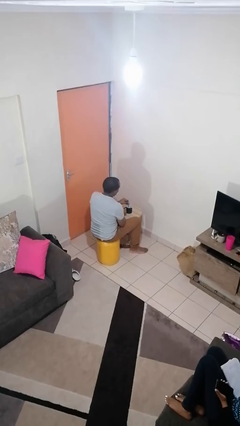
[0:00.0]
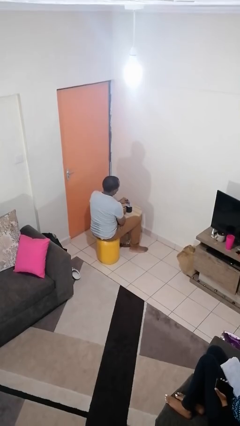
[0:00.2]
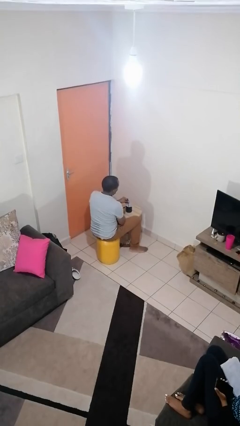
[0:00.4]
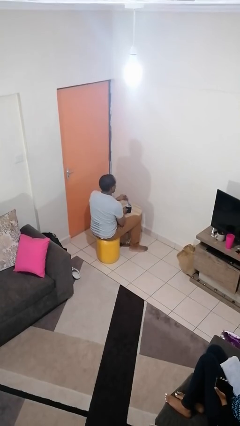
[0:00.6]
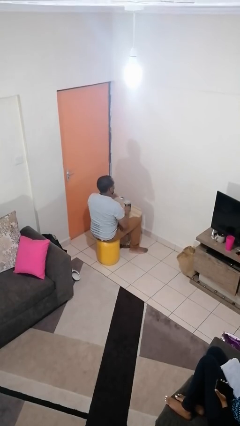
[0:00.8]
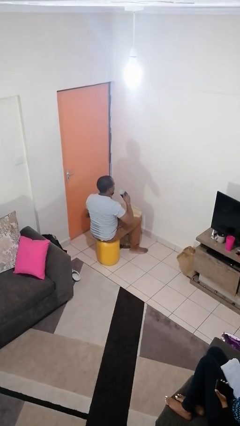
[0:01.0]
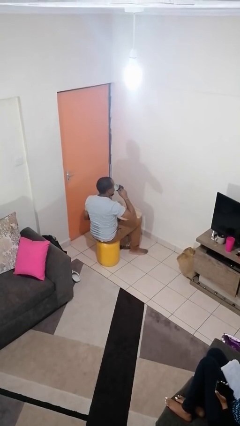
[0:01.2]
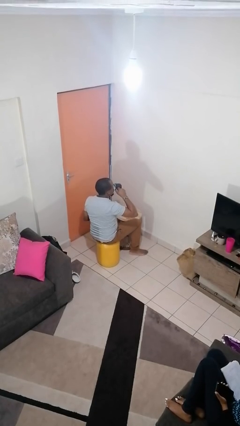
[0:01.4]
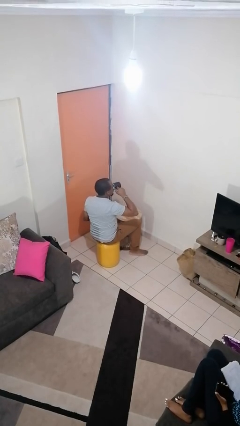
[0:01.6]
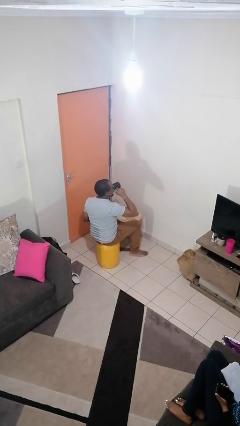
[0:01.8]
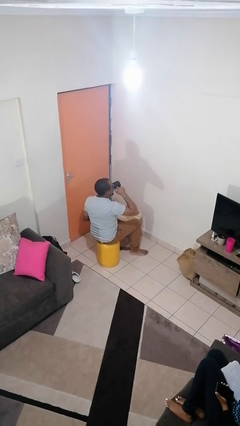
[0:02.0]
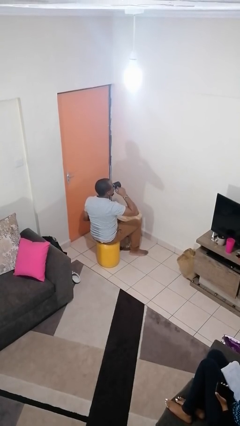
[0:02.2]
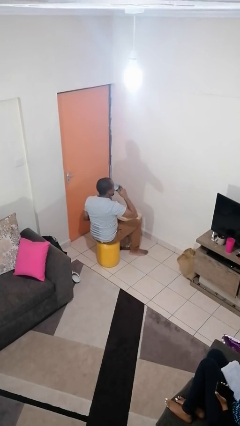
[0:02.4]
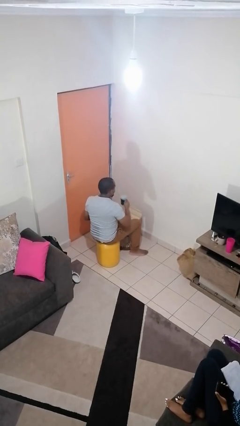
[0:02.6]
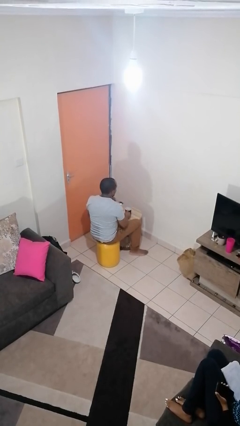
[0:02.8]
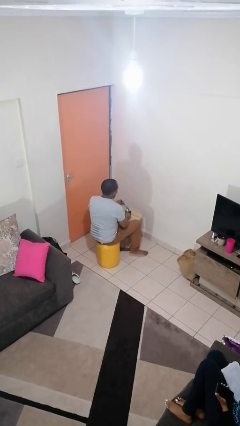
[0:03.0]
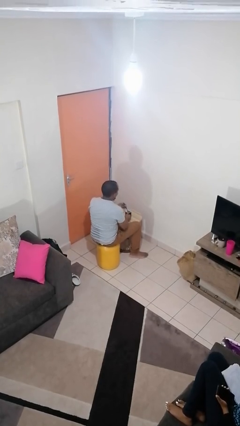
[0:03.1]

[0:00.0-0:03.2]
person drinks from mug

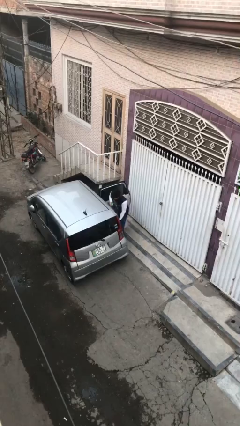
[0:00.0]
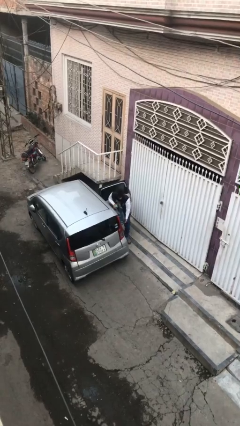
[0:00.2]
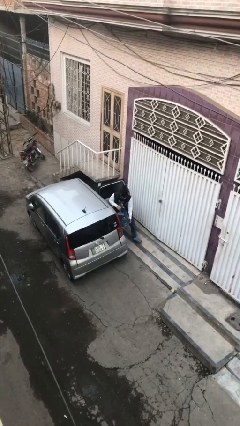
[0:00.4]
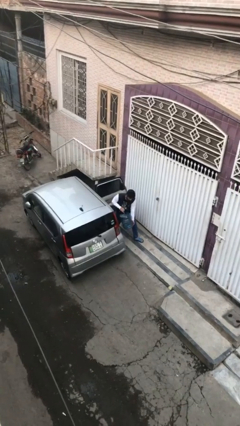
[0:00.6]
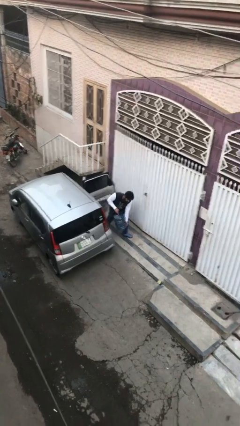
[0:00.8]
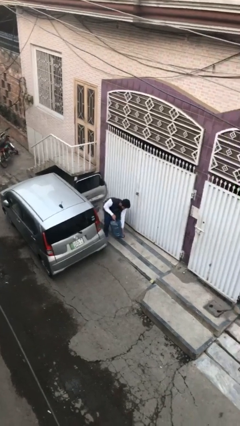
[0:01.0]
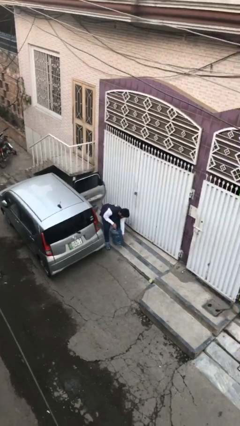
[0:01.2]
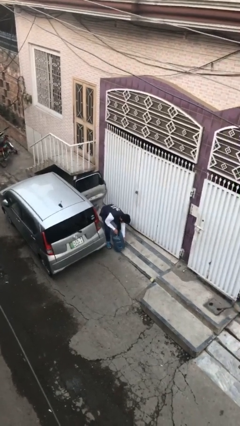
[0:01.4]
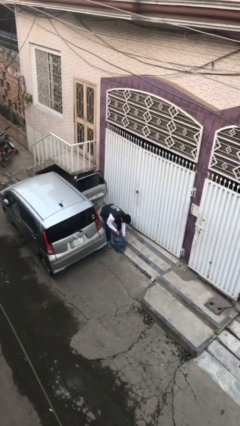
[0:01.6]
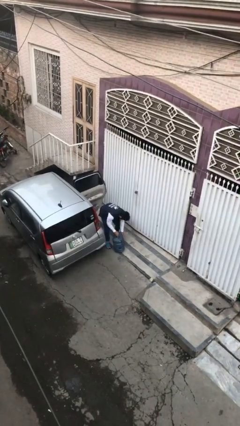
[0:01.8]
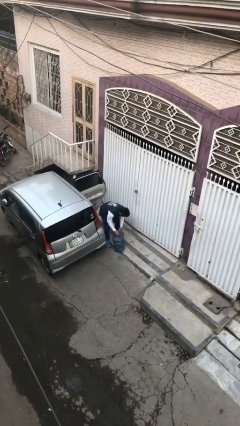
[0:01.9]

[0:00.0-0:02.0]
person unloads car

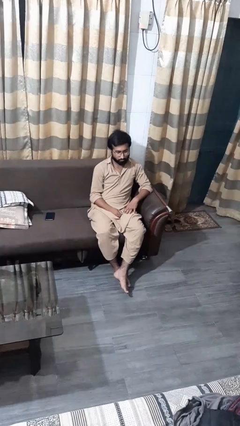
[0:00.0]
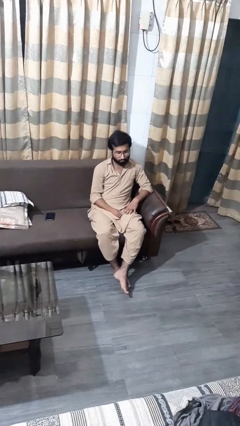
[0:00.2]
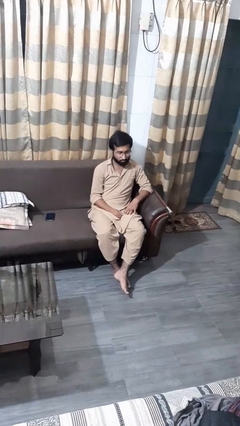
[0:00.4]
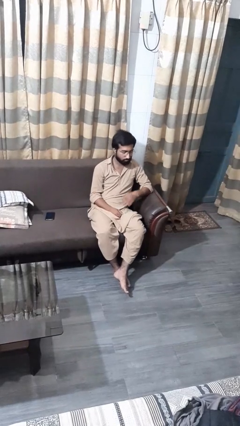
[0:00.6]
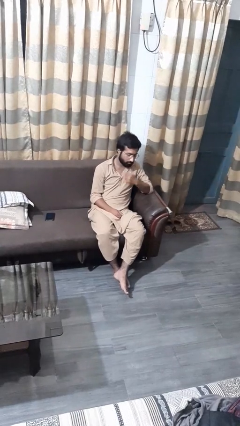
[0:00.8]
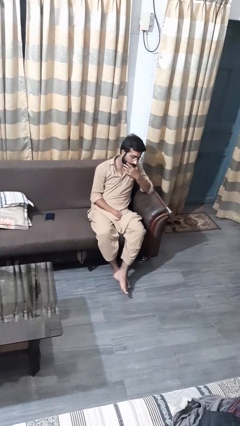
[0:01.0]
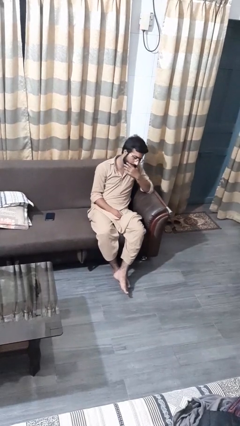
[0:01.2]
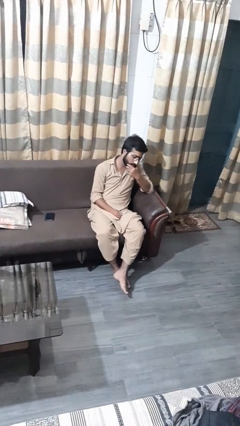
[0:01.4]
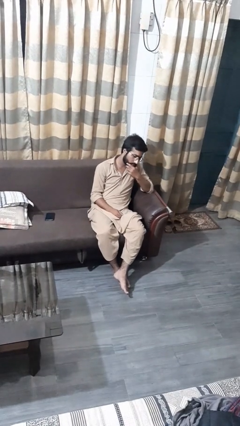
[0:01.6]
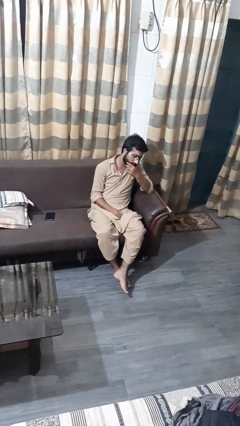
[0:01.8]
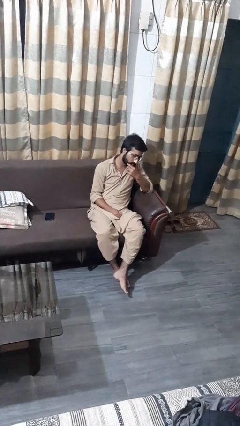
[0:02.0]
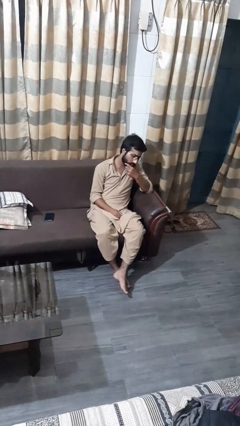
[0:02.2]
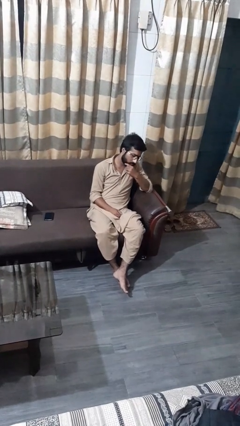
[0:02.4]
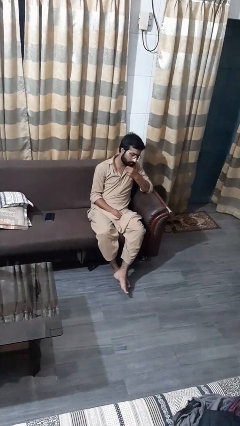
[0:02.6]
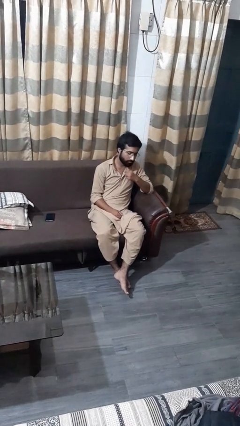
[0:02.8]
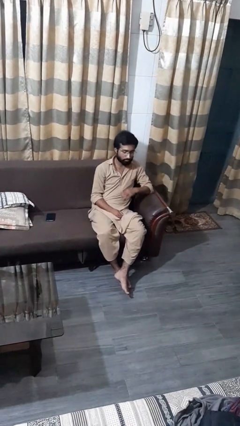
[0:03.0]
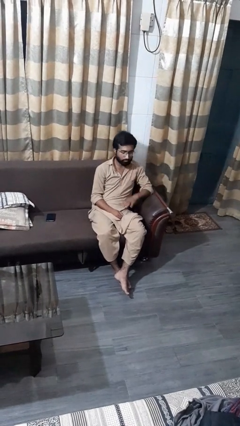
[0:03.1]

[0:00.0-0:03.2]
person strokes chin

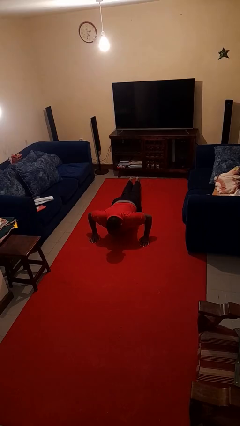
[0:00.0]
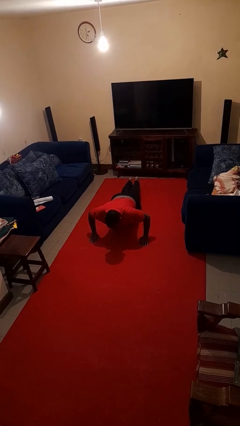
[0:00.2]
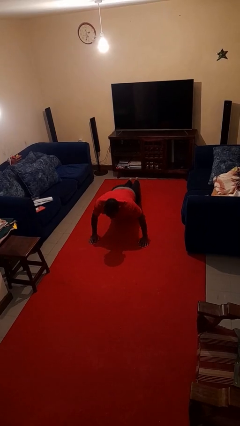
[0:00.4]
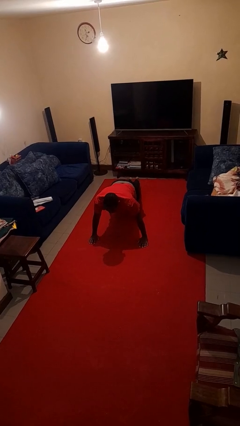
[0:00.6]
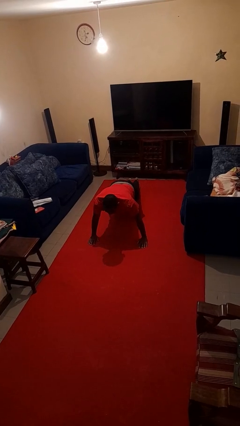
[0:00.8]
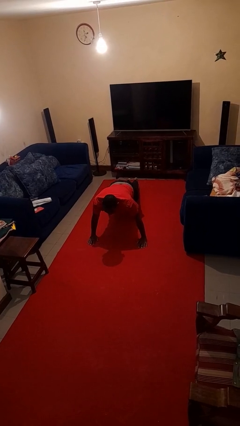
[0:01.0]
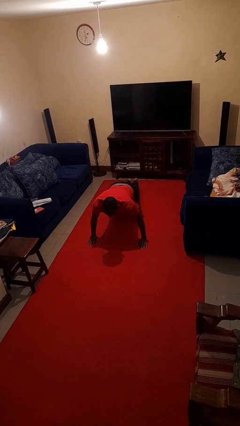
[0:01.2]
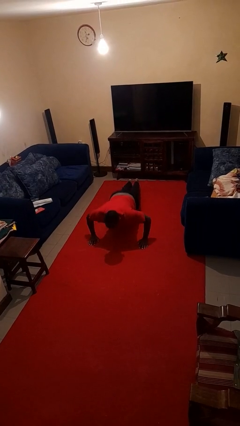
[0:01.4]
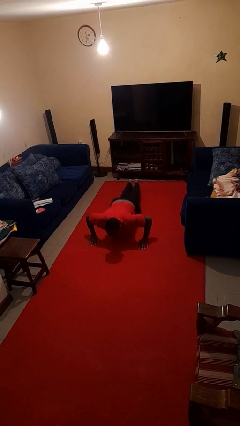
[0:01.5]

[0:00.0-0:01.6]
person exercises with pushup

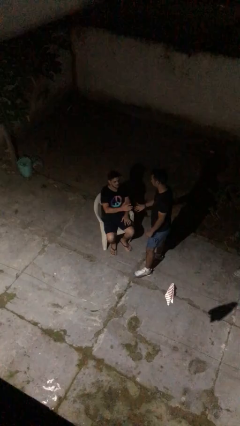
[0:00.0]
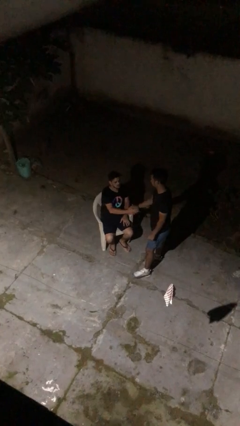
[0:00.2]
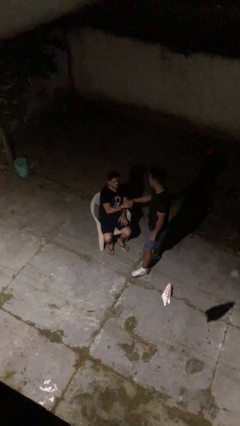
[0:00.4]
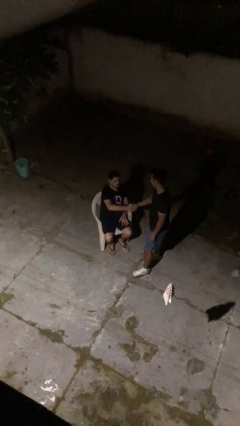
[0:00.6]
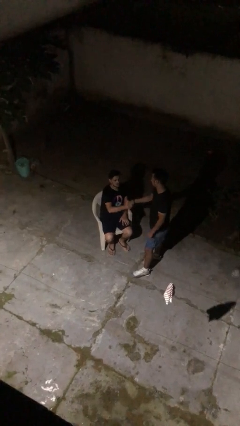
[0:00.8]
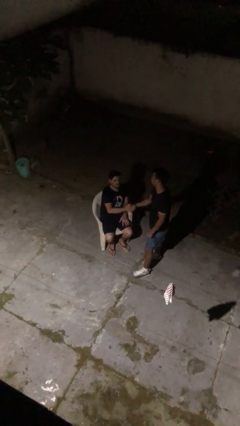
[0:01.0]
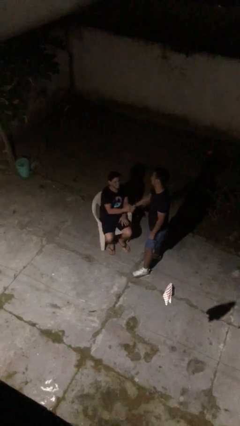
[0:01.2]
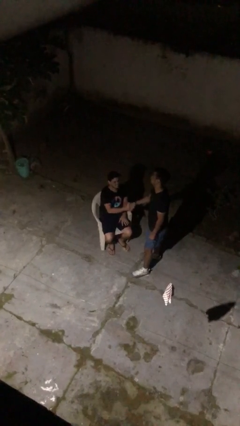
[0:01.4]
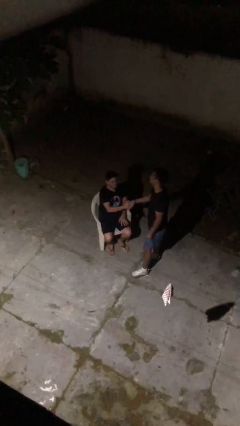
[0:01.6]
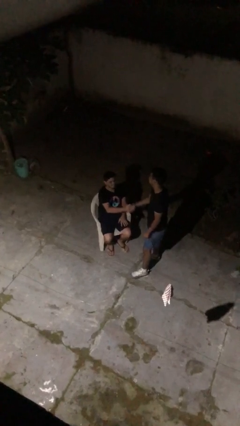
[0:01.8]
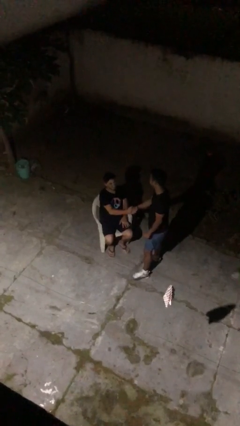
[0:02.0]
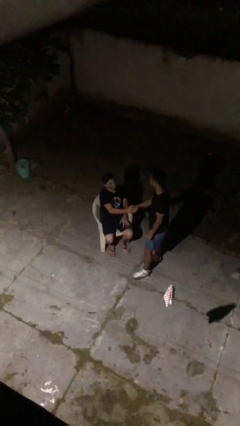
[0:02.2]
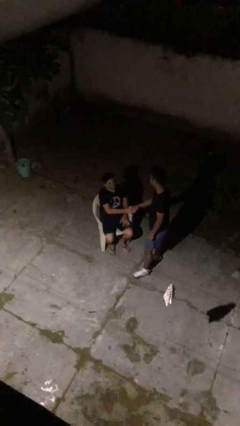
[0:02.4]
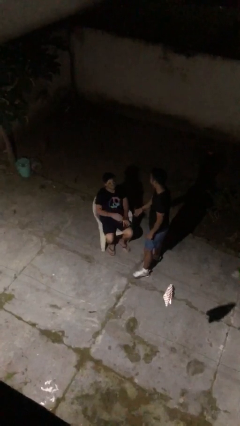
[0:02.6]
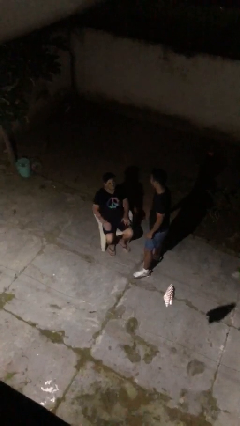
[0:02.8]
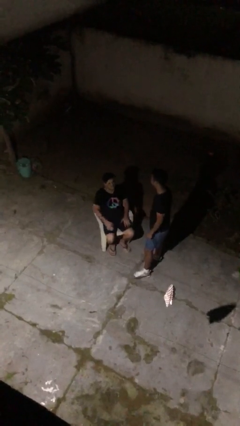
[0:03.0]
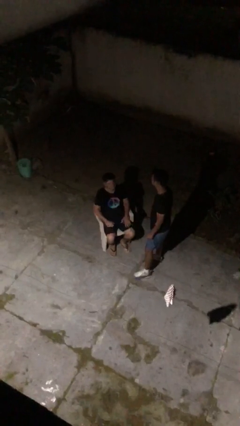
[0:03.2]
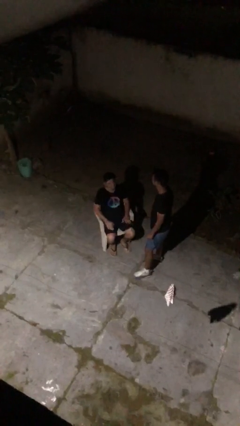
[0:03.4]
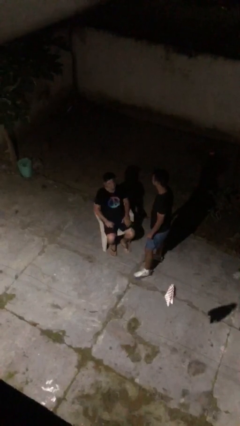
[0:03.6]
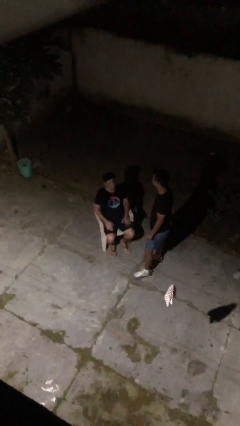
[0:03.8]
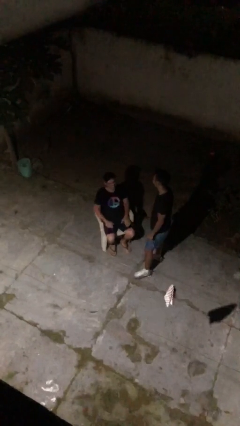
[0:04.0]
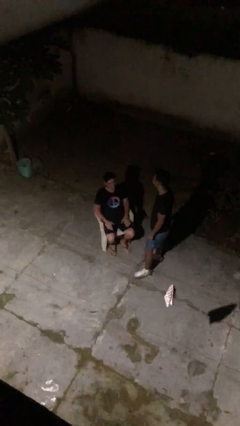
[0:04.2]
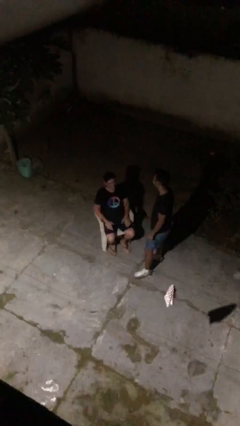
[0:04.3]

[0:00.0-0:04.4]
person shakes hand

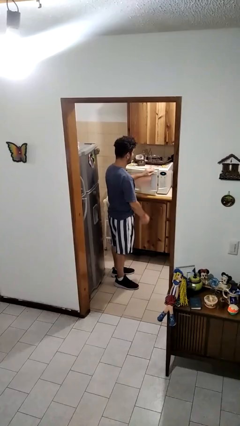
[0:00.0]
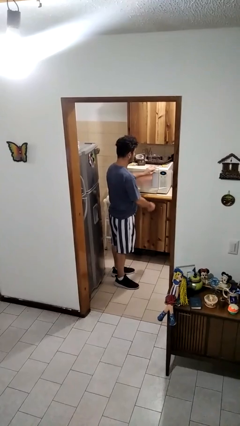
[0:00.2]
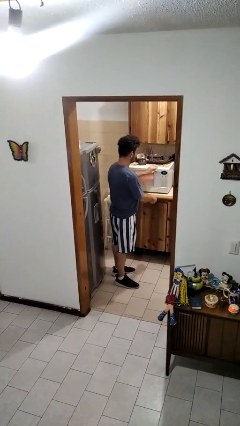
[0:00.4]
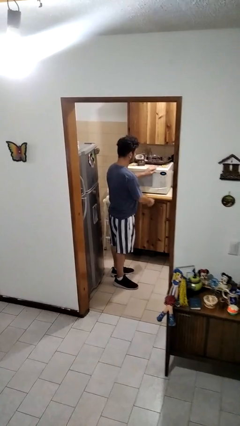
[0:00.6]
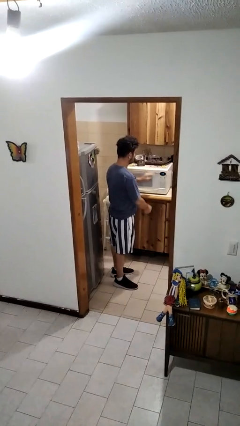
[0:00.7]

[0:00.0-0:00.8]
person closes microwave

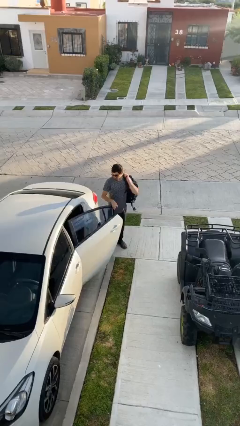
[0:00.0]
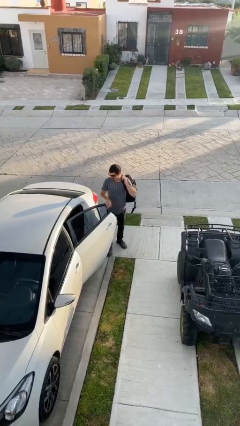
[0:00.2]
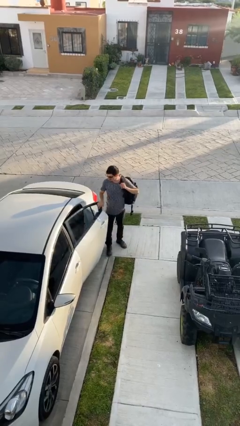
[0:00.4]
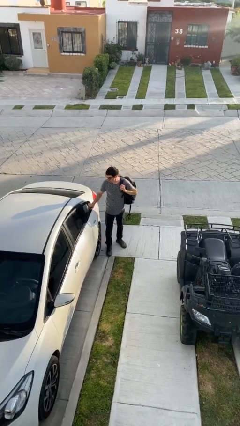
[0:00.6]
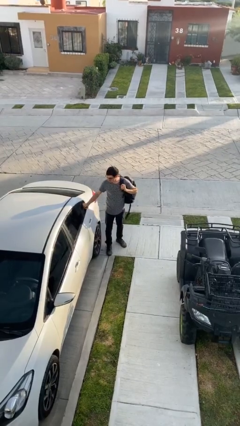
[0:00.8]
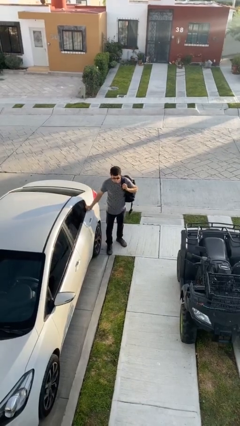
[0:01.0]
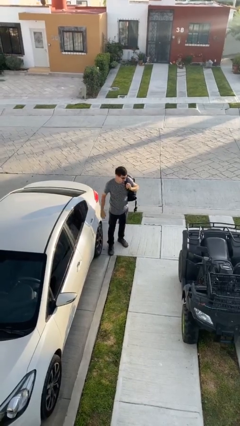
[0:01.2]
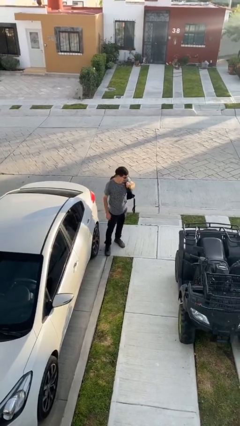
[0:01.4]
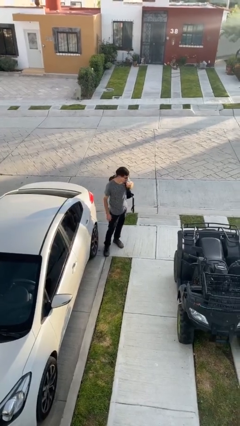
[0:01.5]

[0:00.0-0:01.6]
person closes car door

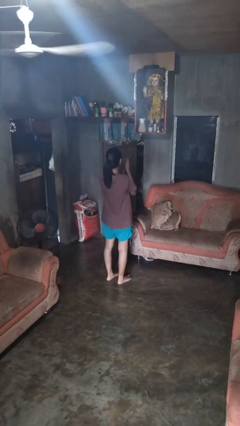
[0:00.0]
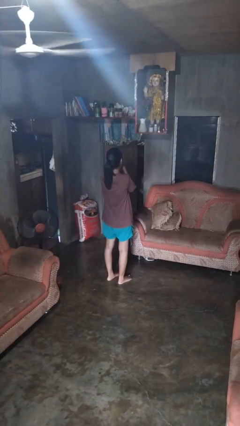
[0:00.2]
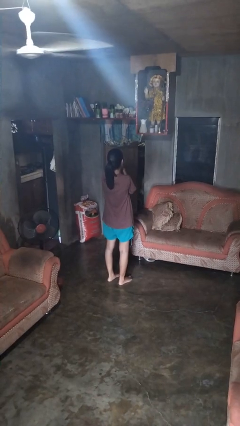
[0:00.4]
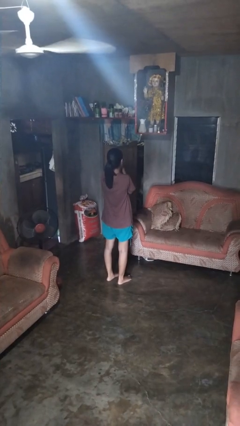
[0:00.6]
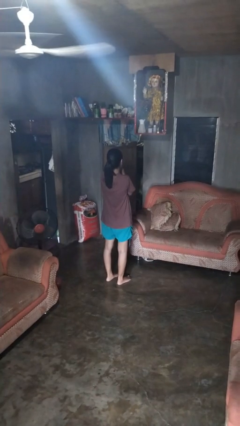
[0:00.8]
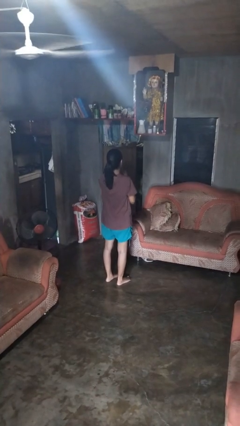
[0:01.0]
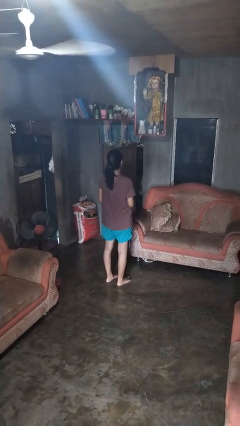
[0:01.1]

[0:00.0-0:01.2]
person prays
